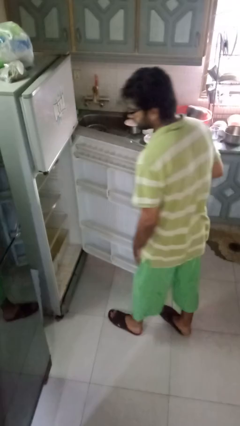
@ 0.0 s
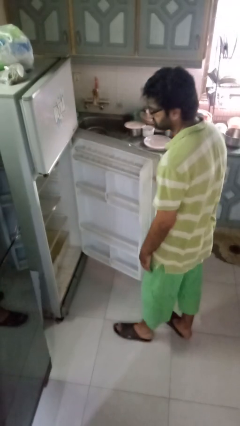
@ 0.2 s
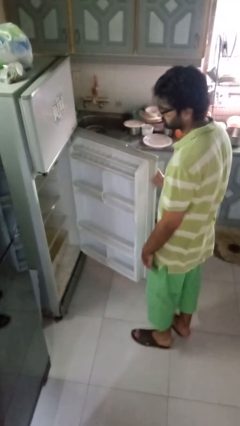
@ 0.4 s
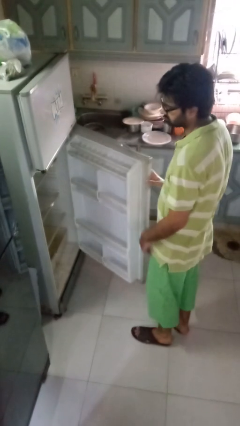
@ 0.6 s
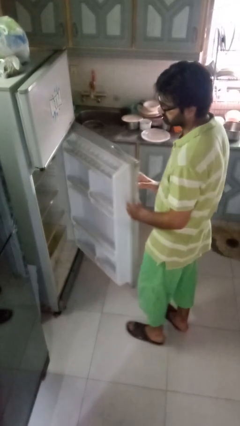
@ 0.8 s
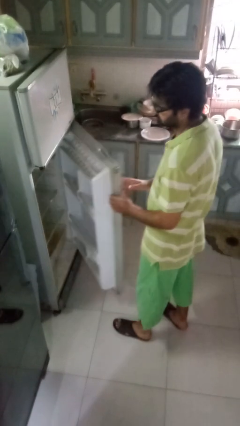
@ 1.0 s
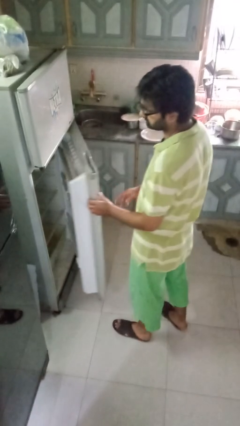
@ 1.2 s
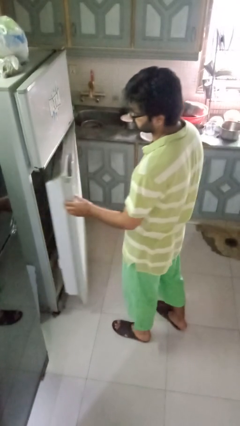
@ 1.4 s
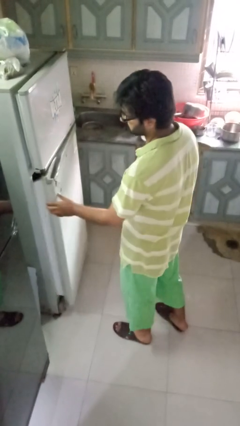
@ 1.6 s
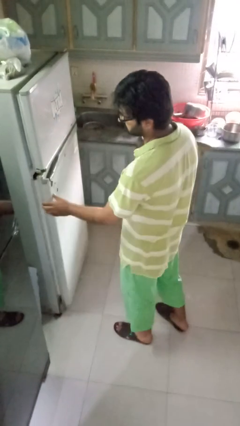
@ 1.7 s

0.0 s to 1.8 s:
person closes refrigerator

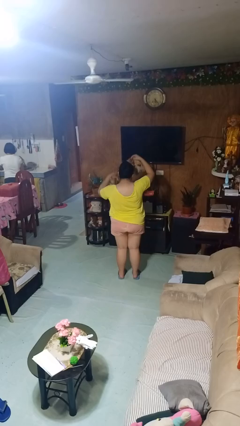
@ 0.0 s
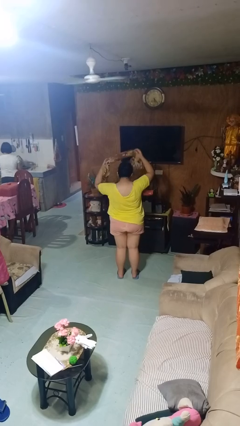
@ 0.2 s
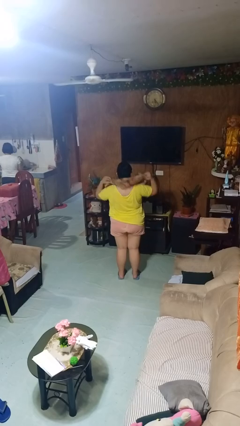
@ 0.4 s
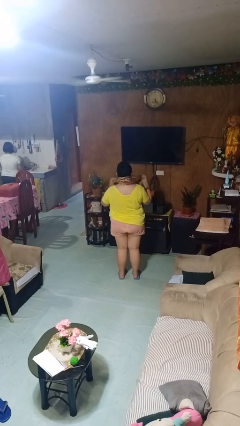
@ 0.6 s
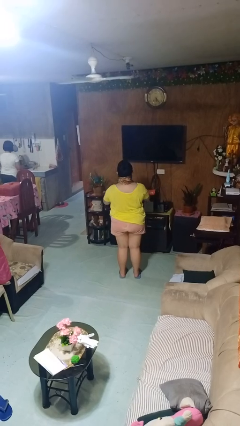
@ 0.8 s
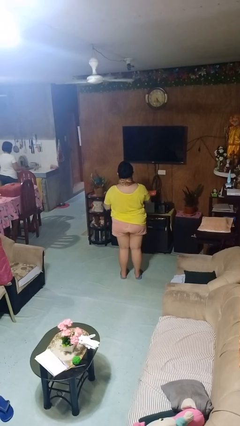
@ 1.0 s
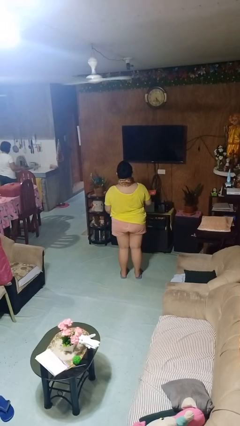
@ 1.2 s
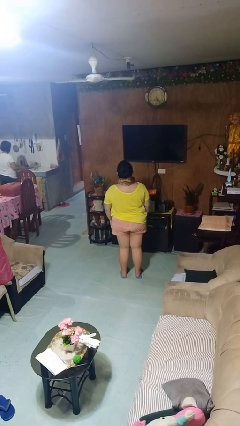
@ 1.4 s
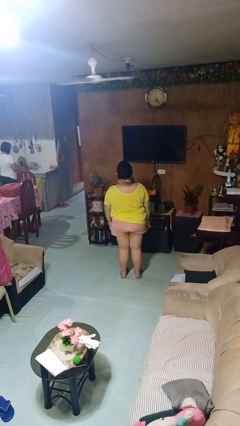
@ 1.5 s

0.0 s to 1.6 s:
person puts on scarf

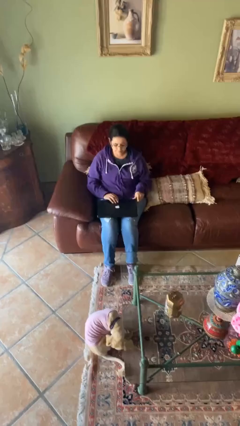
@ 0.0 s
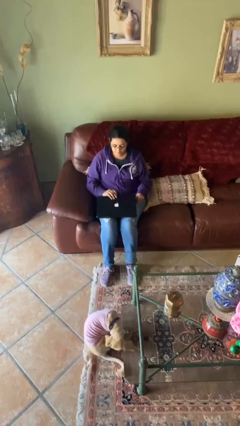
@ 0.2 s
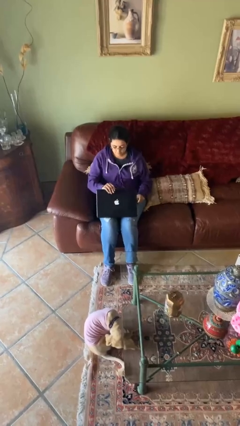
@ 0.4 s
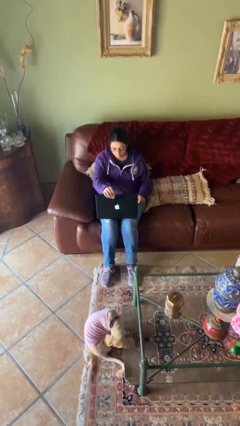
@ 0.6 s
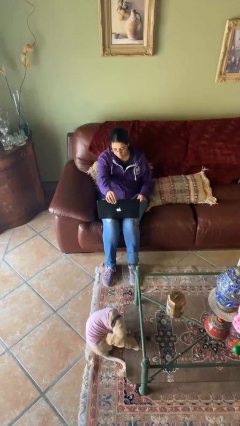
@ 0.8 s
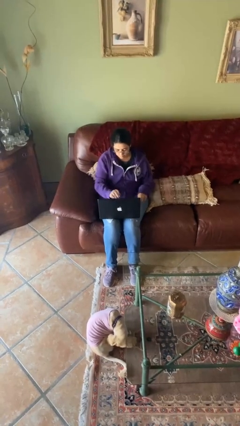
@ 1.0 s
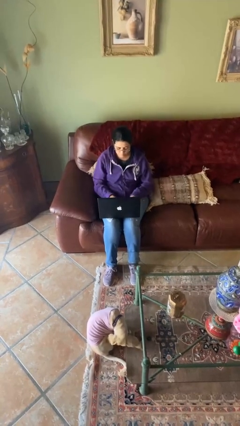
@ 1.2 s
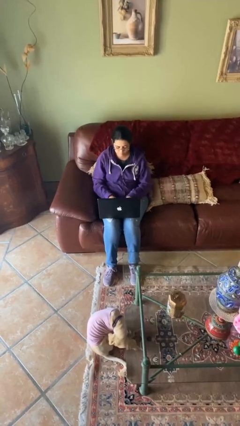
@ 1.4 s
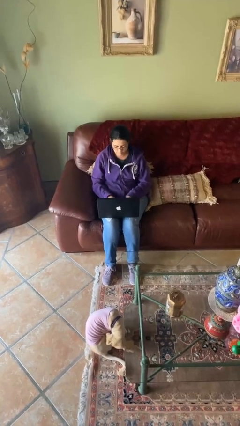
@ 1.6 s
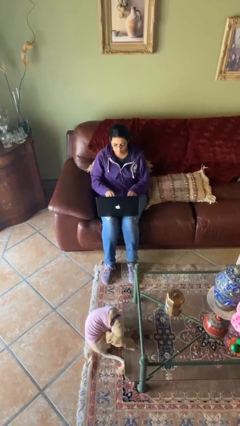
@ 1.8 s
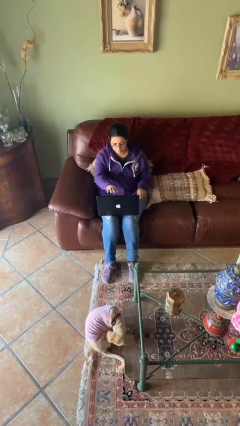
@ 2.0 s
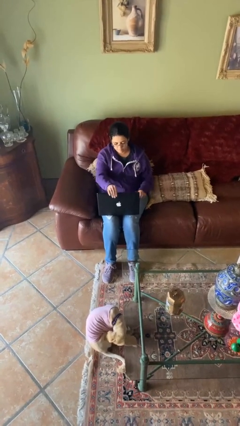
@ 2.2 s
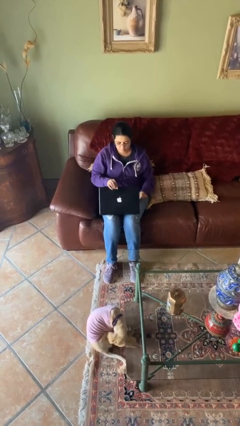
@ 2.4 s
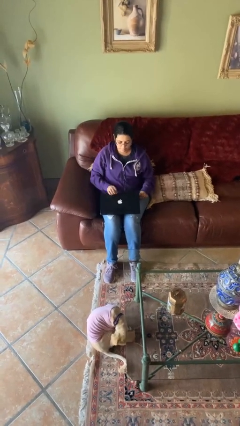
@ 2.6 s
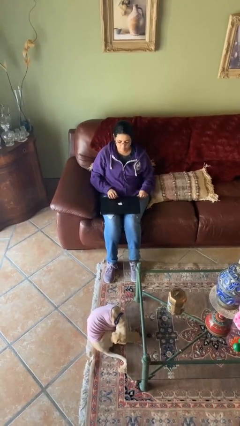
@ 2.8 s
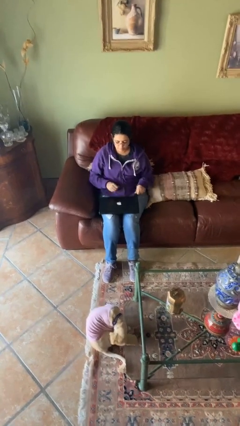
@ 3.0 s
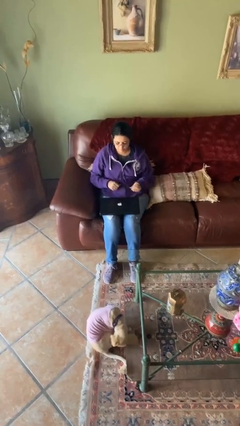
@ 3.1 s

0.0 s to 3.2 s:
person interacts with laptop

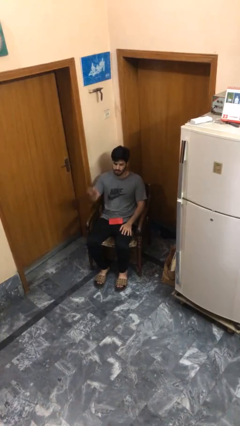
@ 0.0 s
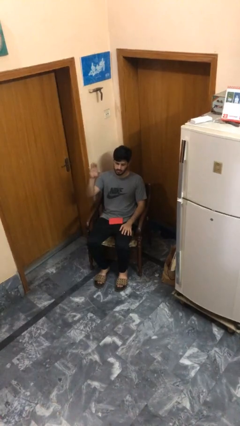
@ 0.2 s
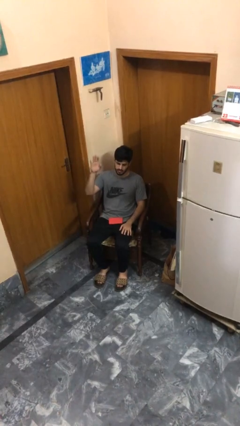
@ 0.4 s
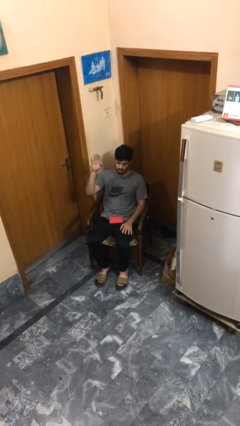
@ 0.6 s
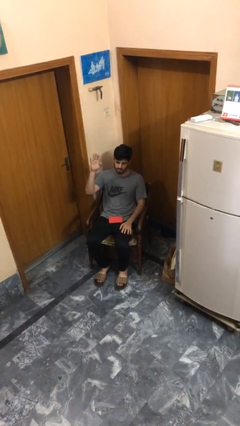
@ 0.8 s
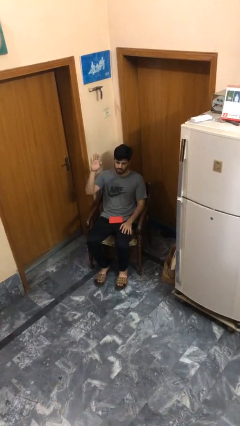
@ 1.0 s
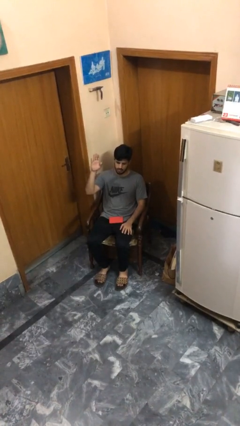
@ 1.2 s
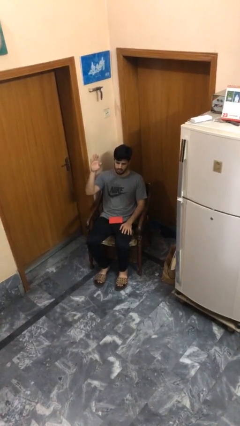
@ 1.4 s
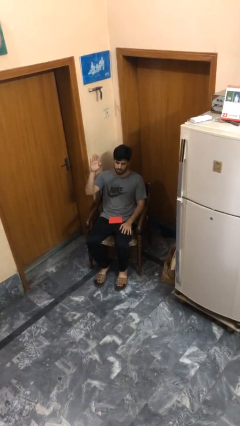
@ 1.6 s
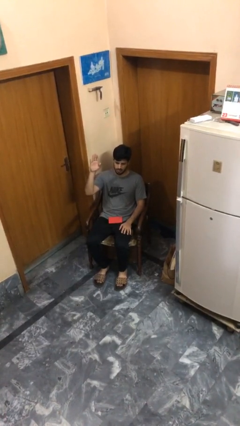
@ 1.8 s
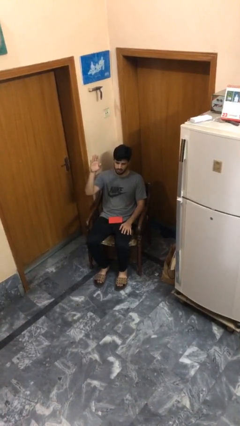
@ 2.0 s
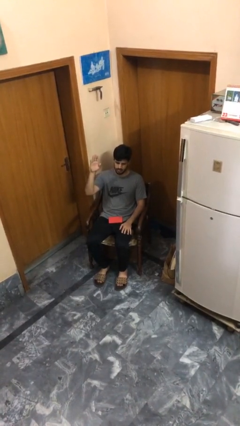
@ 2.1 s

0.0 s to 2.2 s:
person gestures raise hand

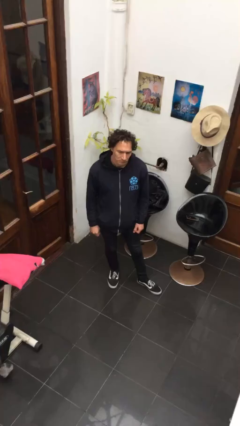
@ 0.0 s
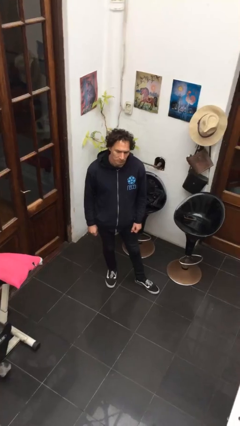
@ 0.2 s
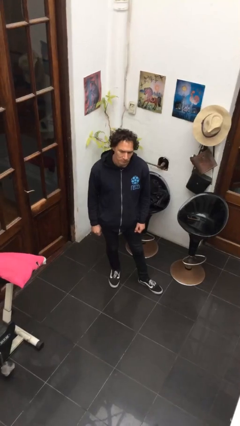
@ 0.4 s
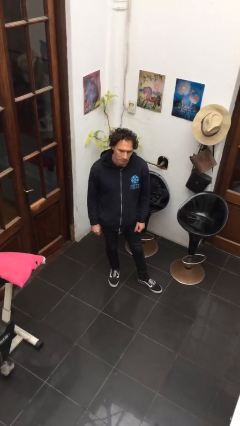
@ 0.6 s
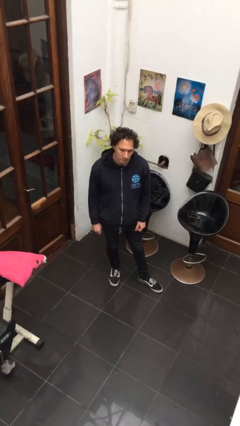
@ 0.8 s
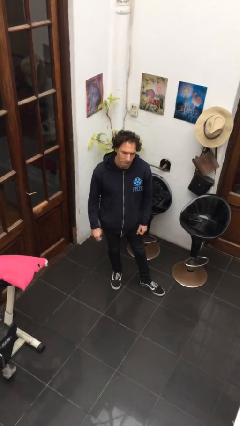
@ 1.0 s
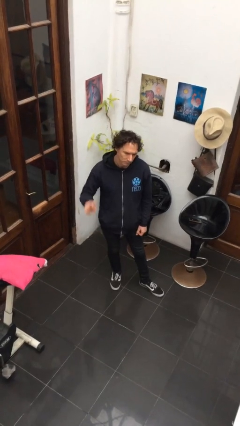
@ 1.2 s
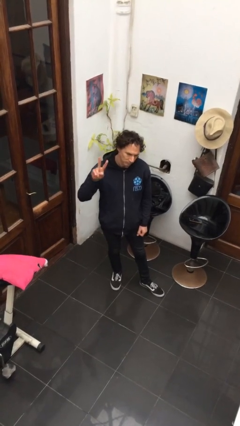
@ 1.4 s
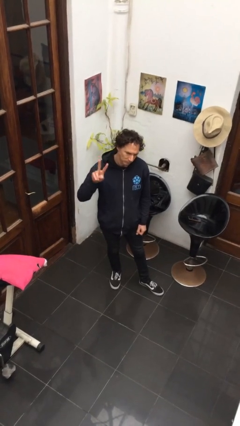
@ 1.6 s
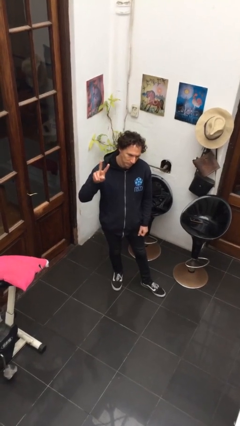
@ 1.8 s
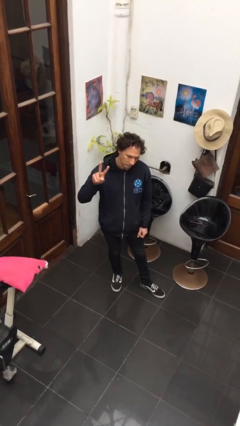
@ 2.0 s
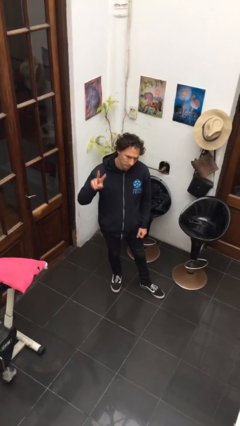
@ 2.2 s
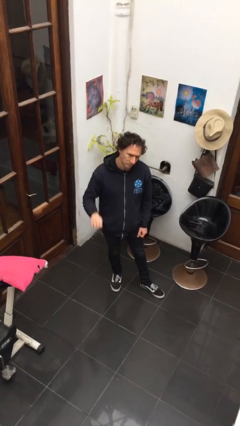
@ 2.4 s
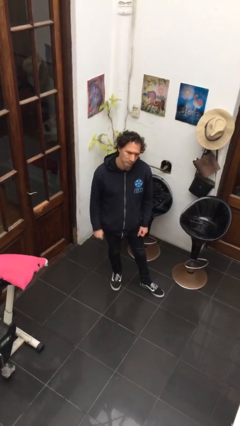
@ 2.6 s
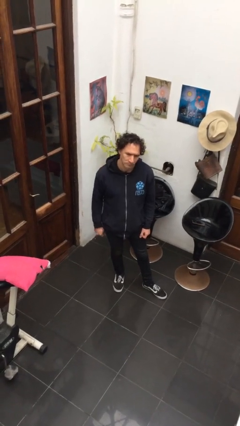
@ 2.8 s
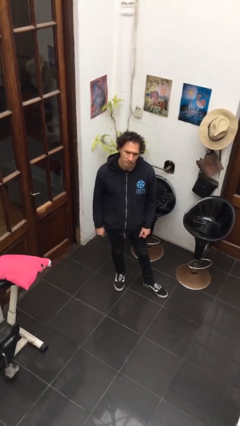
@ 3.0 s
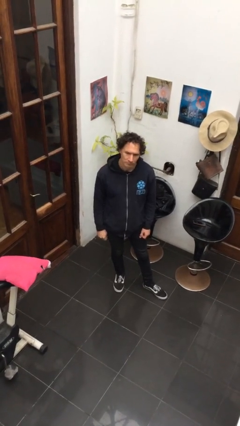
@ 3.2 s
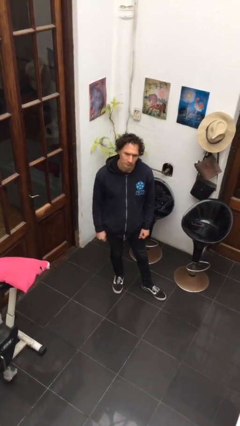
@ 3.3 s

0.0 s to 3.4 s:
person gestures peace

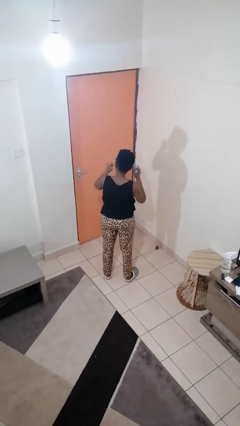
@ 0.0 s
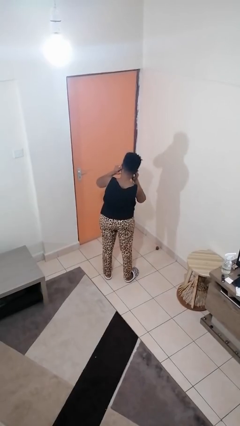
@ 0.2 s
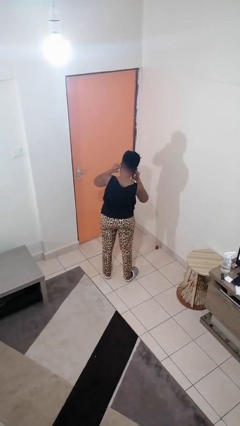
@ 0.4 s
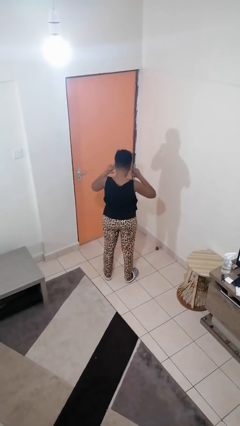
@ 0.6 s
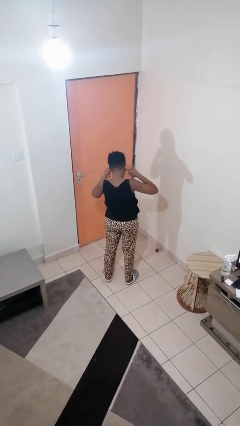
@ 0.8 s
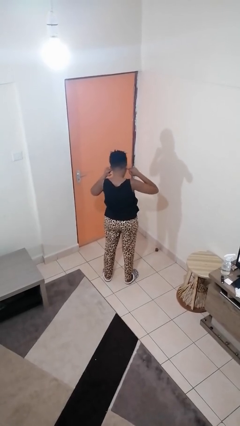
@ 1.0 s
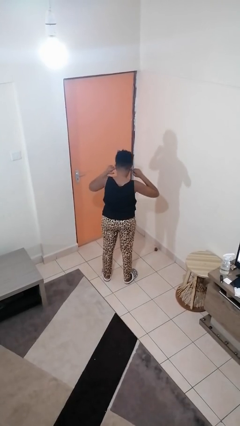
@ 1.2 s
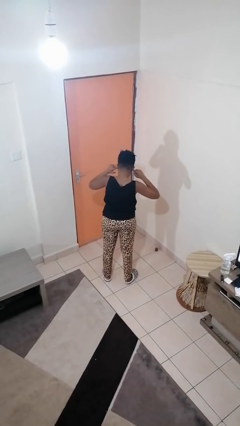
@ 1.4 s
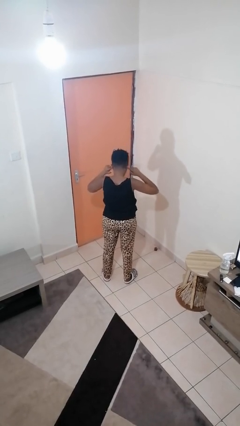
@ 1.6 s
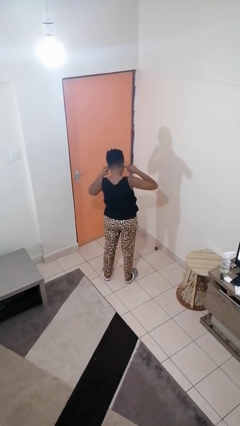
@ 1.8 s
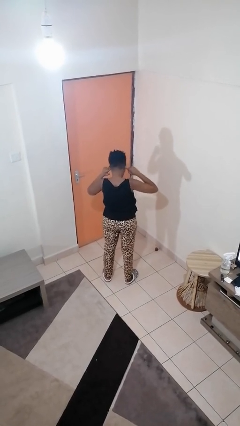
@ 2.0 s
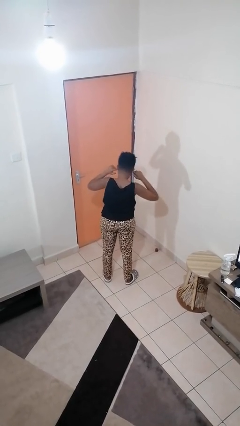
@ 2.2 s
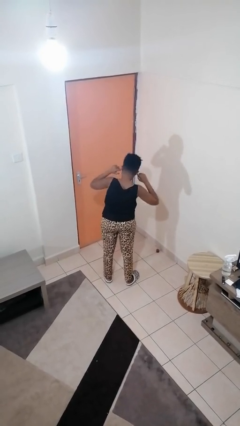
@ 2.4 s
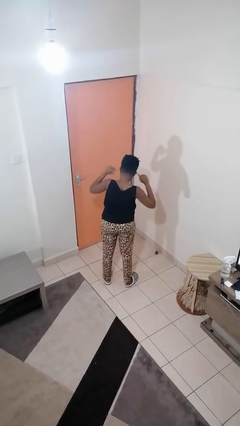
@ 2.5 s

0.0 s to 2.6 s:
person puts fingers in ear

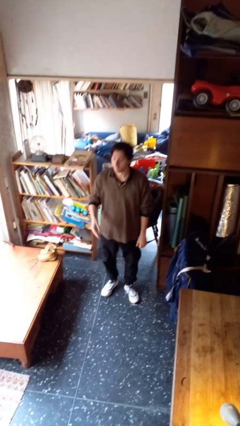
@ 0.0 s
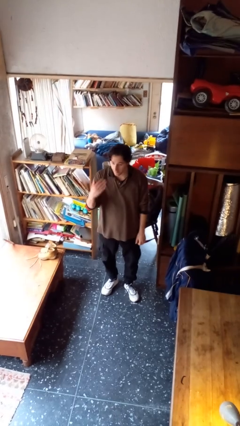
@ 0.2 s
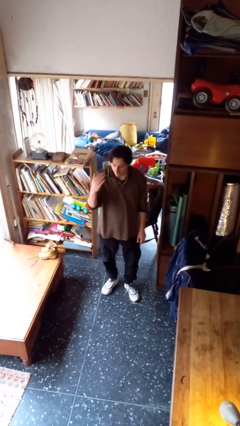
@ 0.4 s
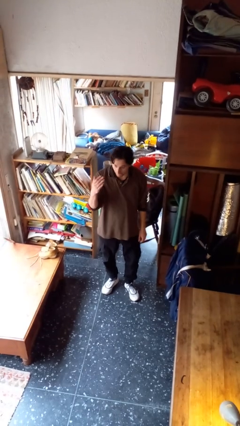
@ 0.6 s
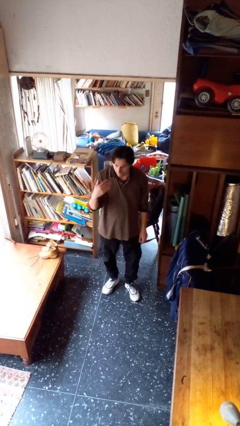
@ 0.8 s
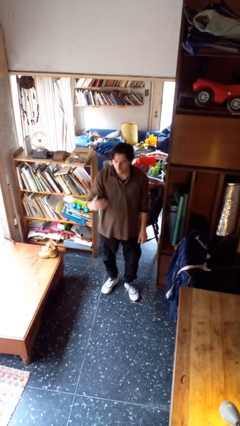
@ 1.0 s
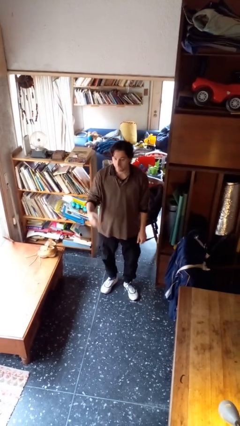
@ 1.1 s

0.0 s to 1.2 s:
person gestures come here

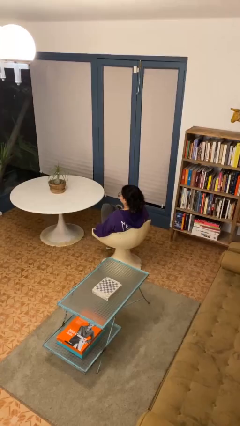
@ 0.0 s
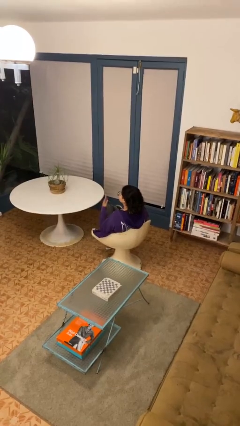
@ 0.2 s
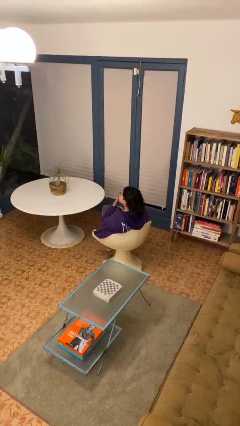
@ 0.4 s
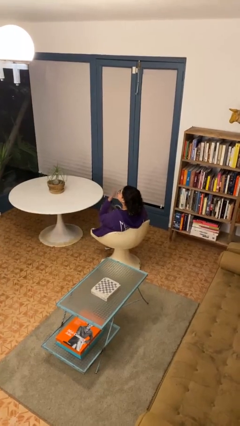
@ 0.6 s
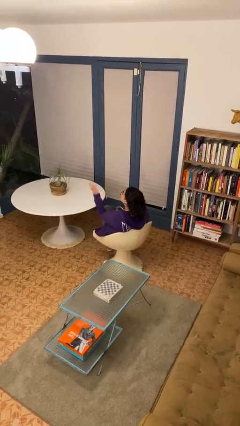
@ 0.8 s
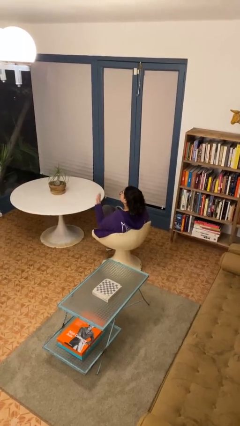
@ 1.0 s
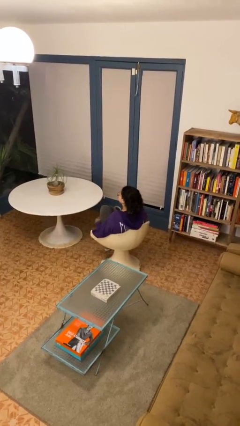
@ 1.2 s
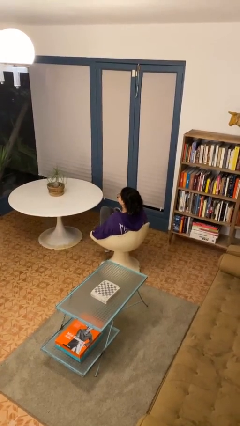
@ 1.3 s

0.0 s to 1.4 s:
person gestures blow kiss
